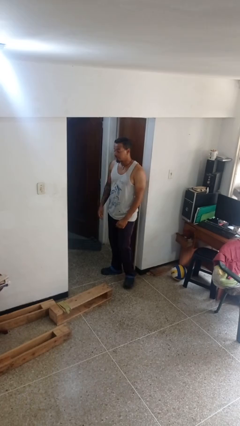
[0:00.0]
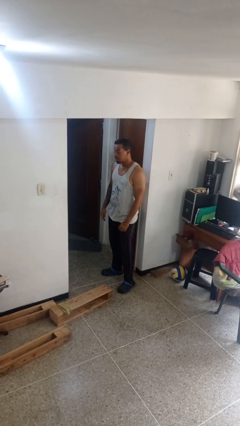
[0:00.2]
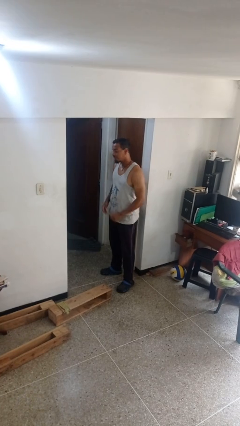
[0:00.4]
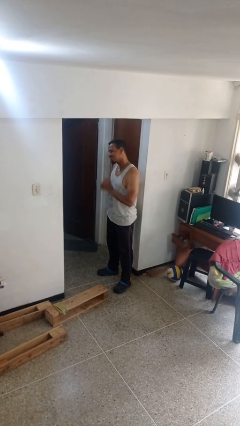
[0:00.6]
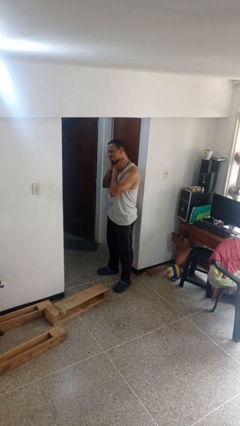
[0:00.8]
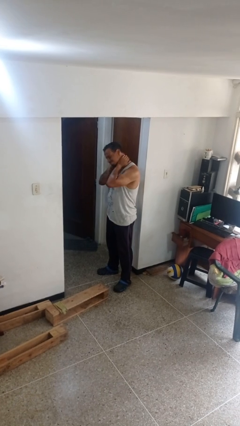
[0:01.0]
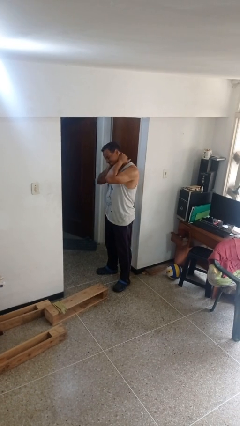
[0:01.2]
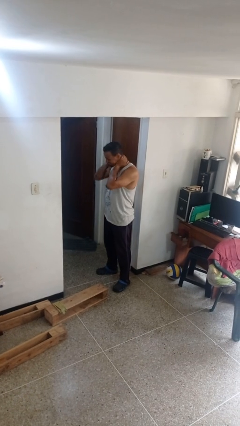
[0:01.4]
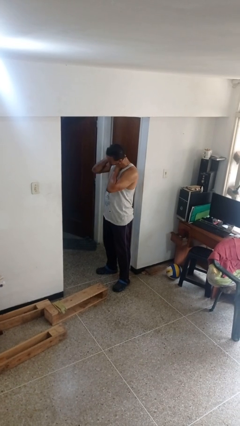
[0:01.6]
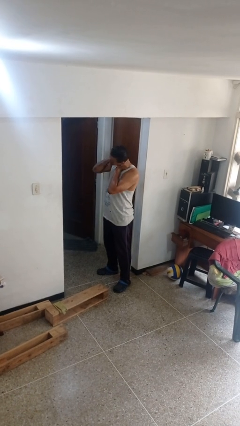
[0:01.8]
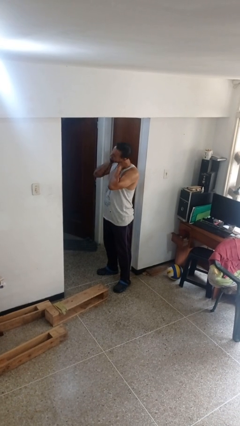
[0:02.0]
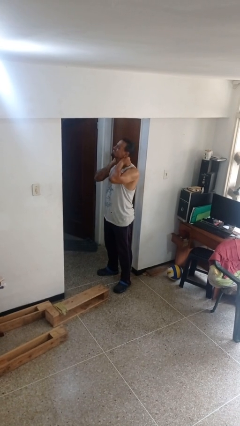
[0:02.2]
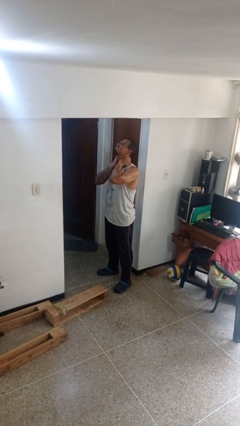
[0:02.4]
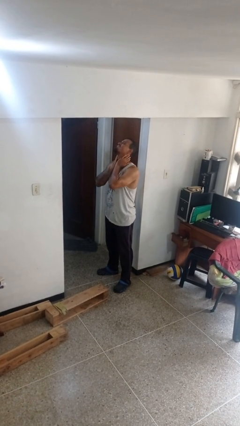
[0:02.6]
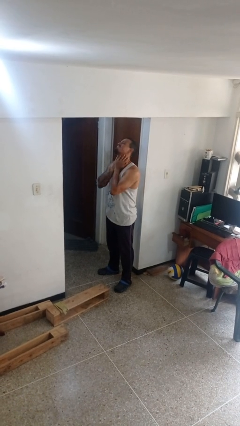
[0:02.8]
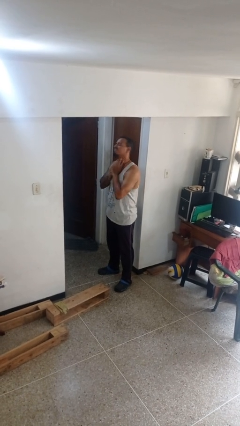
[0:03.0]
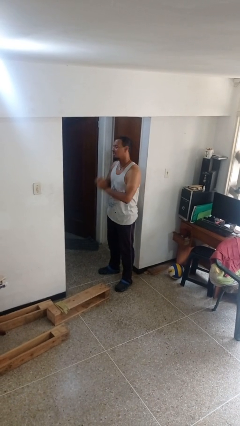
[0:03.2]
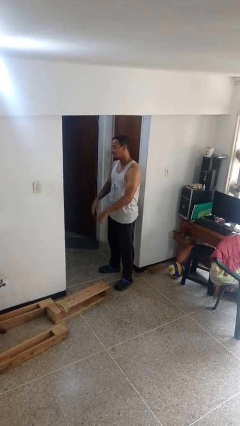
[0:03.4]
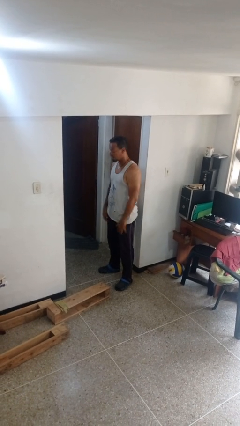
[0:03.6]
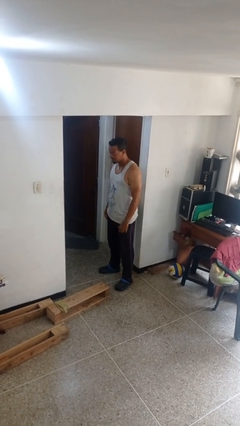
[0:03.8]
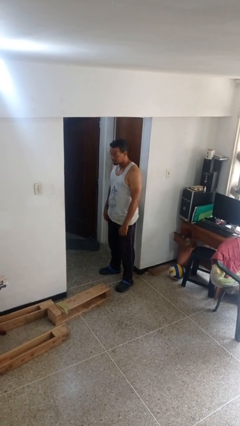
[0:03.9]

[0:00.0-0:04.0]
person rubs neck

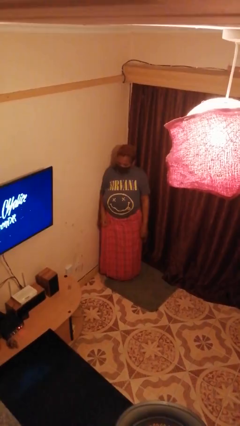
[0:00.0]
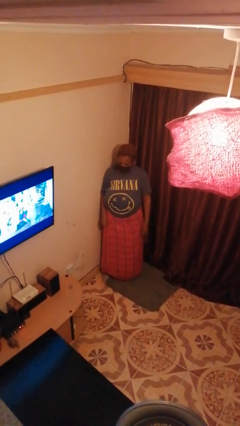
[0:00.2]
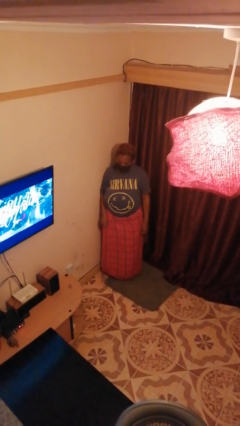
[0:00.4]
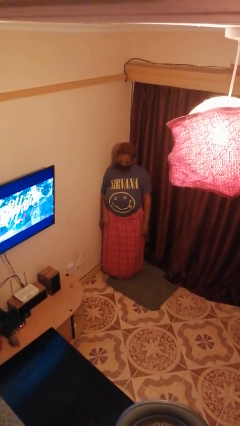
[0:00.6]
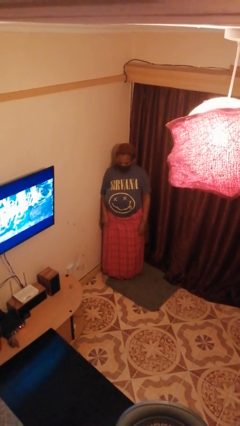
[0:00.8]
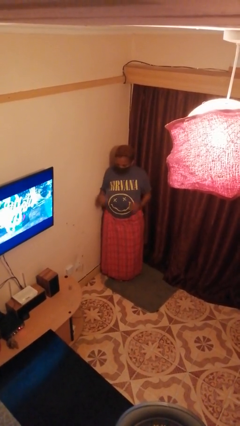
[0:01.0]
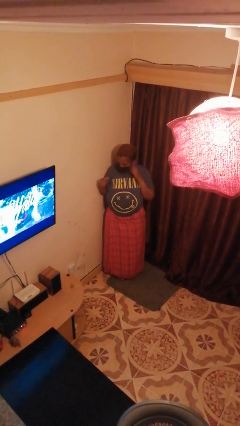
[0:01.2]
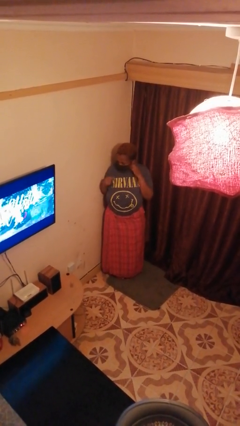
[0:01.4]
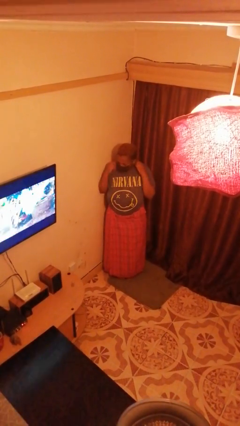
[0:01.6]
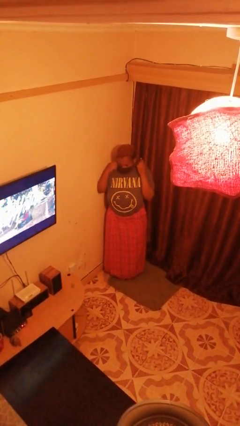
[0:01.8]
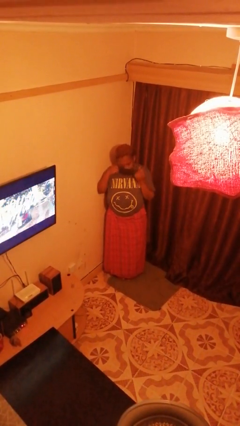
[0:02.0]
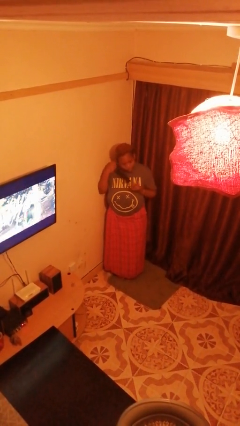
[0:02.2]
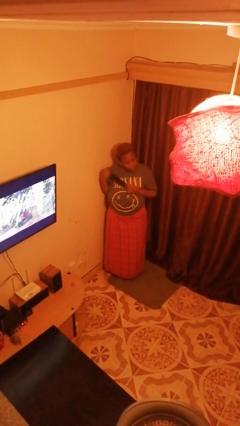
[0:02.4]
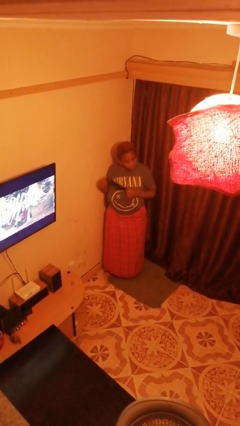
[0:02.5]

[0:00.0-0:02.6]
person takes off facemask

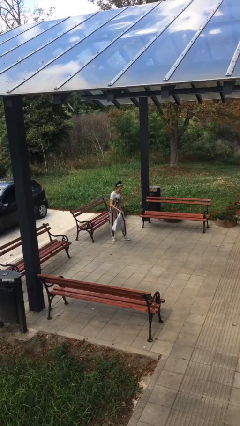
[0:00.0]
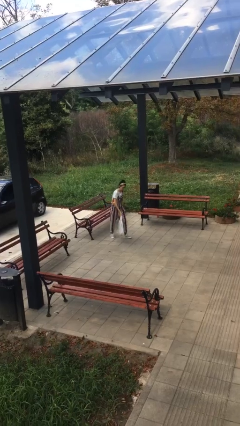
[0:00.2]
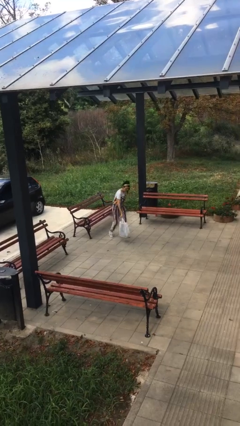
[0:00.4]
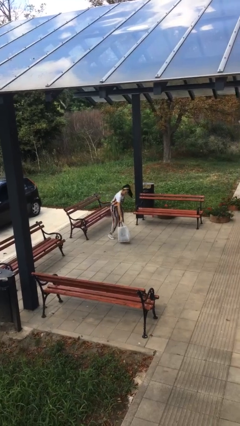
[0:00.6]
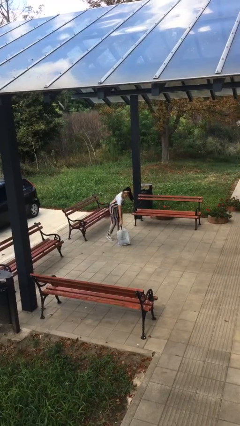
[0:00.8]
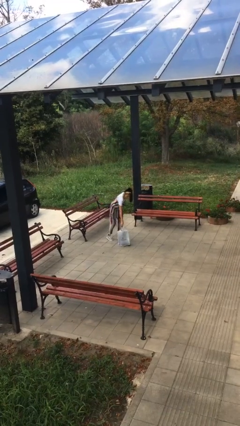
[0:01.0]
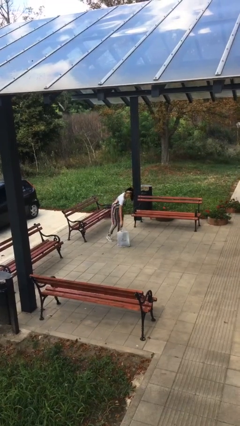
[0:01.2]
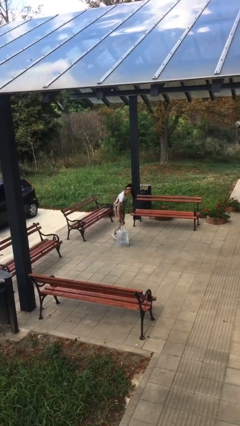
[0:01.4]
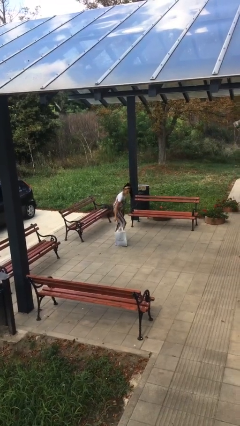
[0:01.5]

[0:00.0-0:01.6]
person puts down object on floor

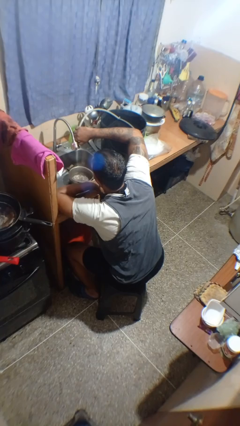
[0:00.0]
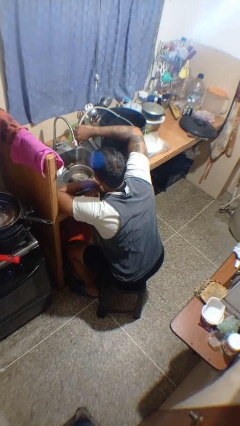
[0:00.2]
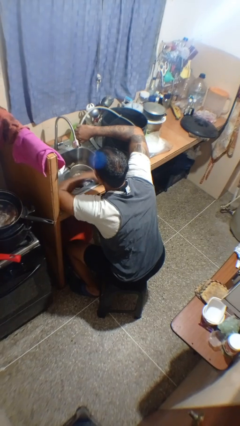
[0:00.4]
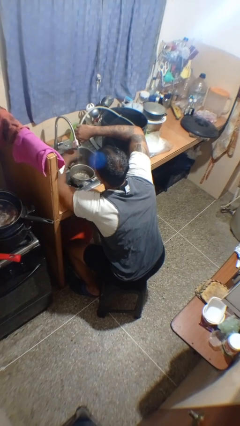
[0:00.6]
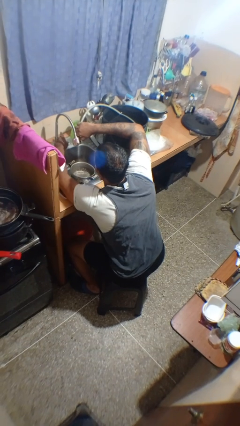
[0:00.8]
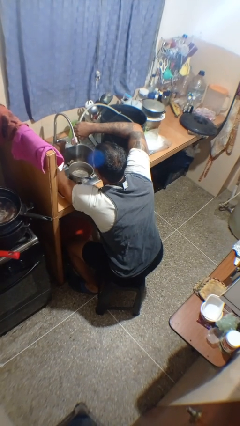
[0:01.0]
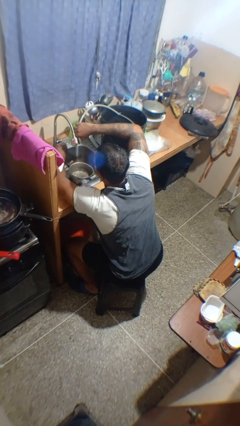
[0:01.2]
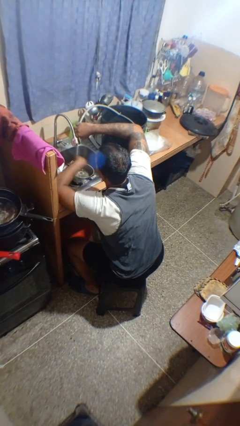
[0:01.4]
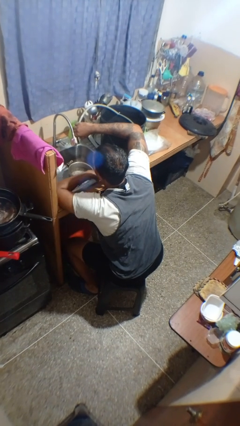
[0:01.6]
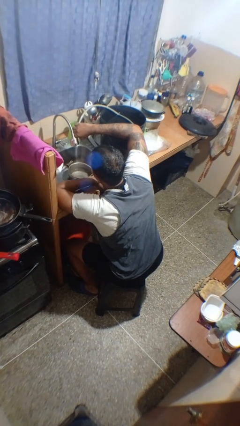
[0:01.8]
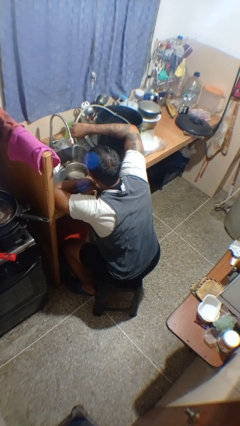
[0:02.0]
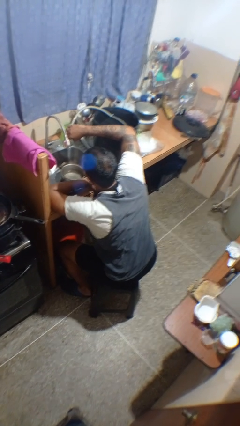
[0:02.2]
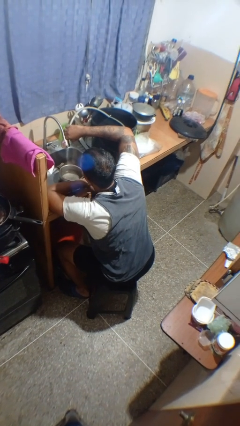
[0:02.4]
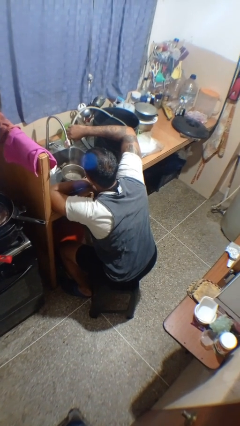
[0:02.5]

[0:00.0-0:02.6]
person turns on faucet

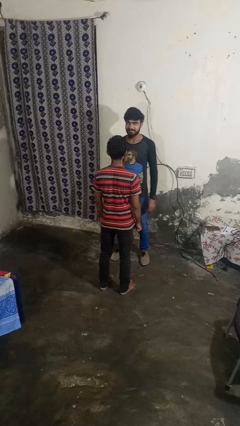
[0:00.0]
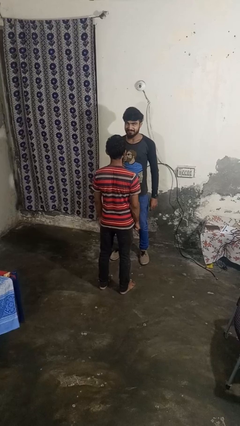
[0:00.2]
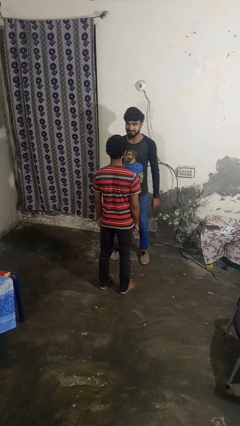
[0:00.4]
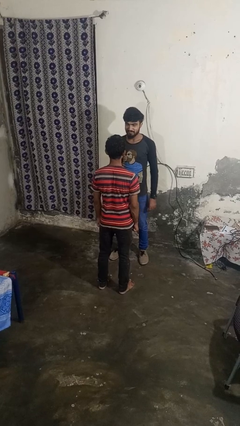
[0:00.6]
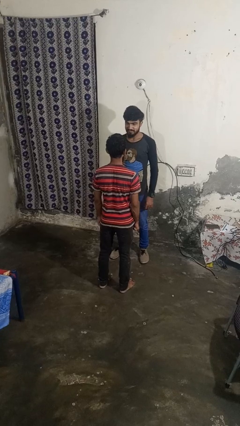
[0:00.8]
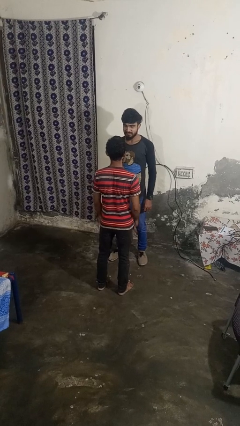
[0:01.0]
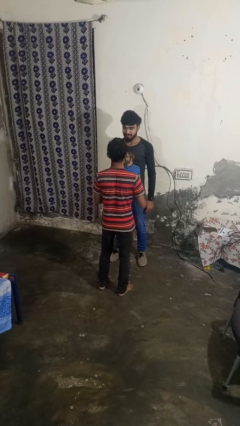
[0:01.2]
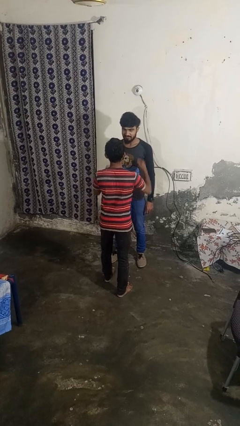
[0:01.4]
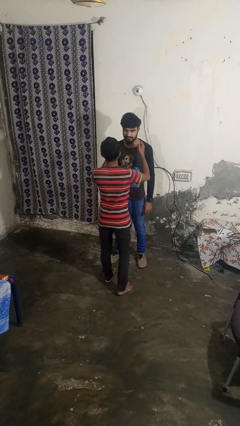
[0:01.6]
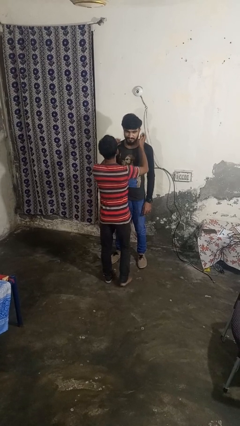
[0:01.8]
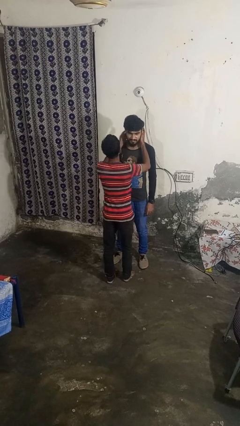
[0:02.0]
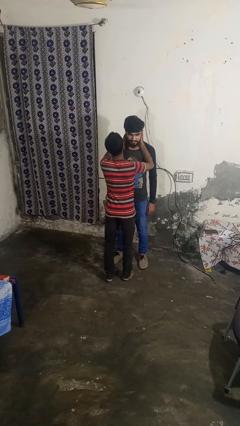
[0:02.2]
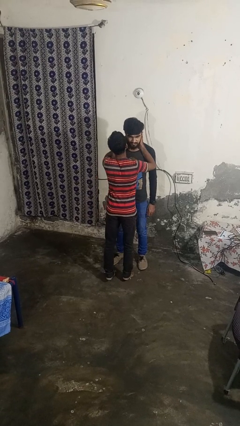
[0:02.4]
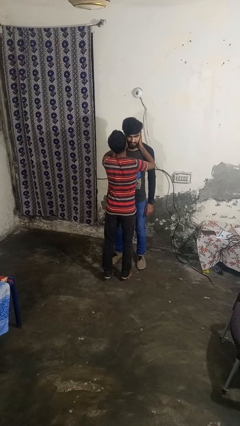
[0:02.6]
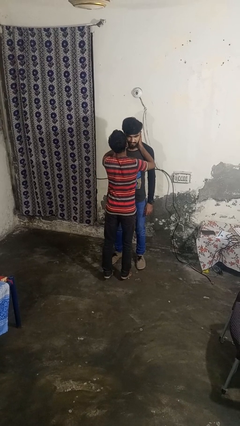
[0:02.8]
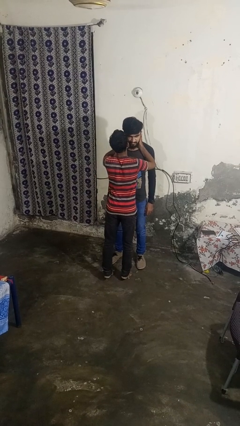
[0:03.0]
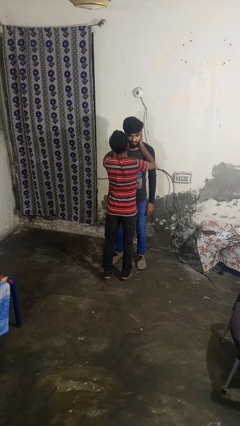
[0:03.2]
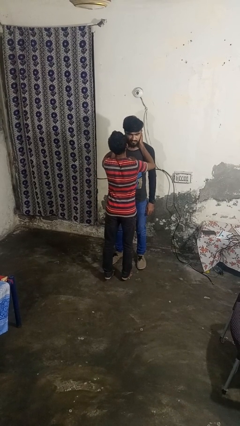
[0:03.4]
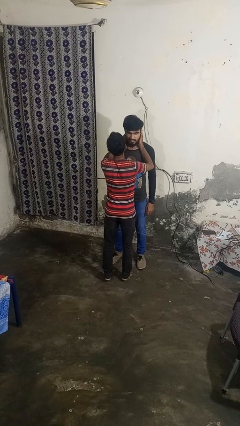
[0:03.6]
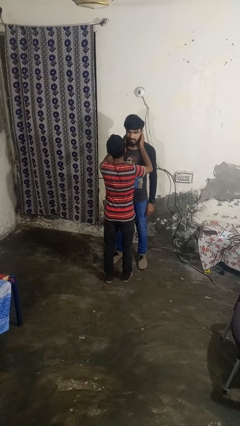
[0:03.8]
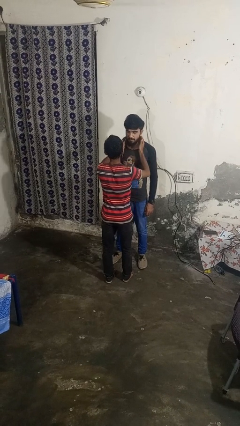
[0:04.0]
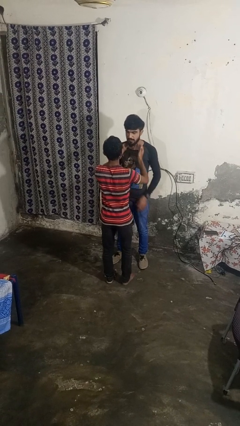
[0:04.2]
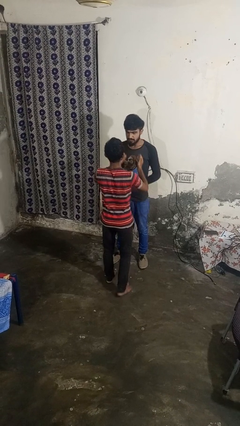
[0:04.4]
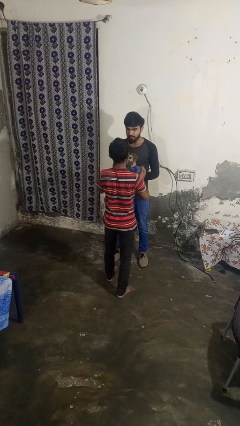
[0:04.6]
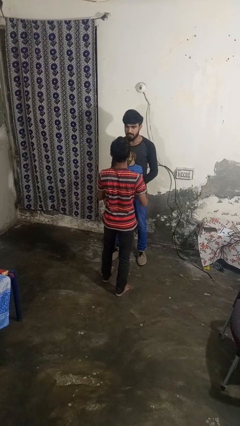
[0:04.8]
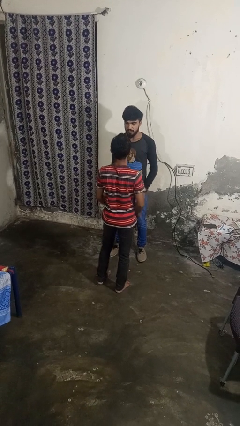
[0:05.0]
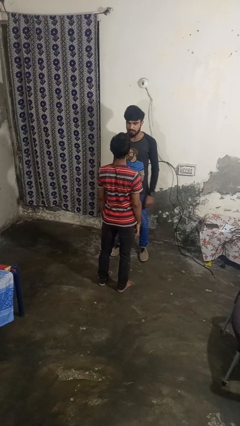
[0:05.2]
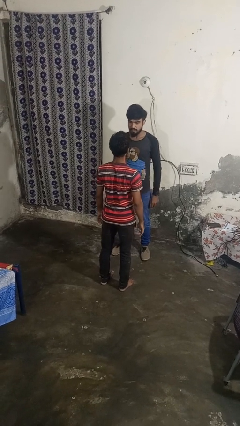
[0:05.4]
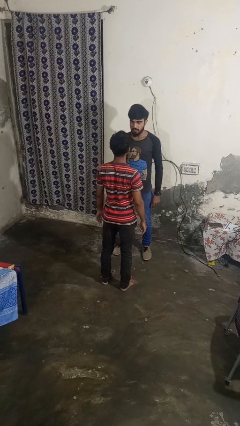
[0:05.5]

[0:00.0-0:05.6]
person kisses cheek of person

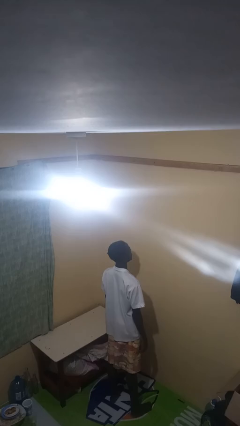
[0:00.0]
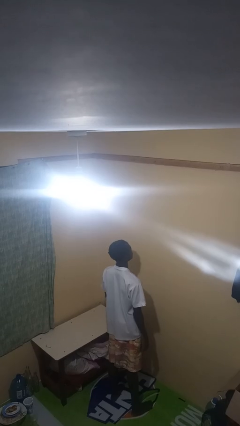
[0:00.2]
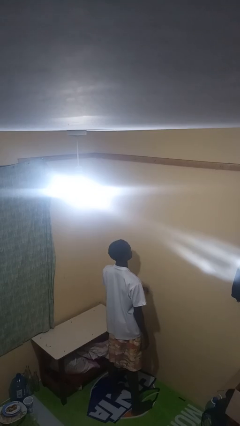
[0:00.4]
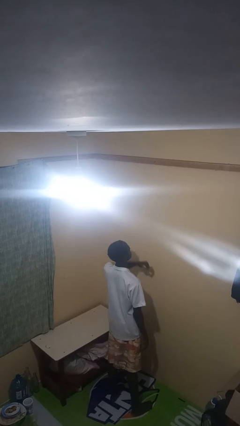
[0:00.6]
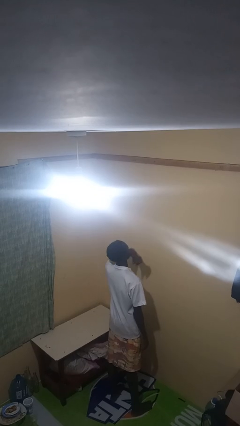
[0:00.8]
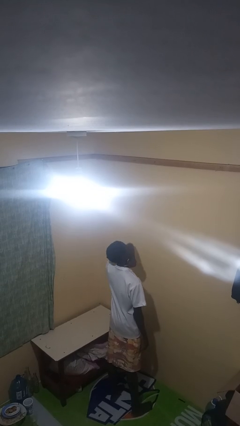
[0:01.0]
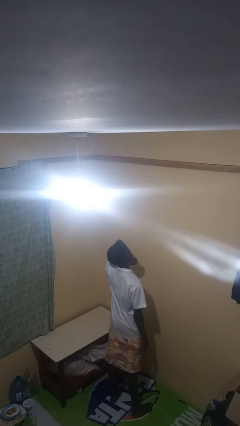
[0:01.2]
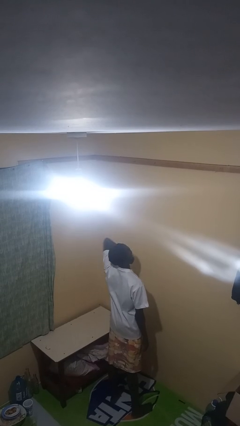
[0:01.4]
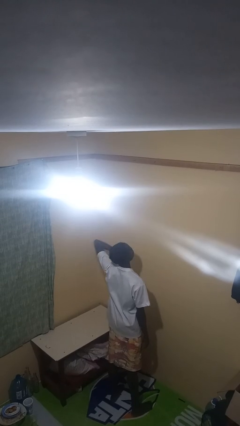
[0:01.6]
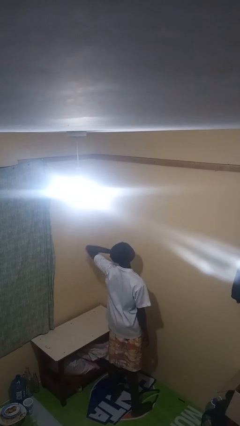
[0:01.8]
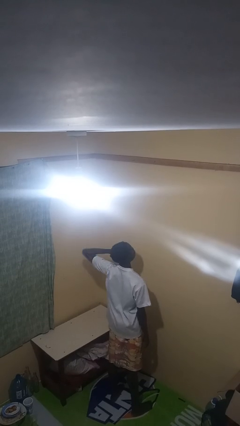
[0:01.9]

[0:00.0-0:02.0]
person gestures cut
